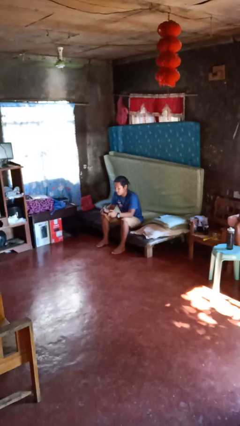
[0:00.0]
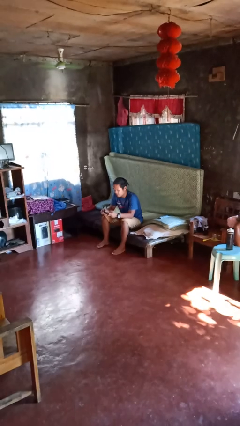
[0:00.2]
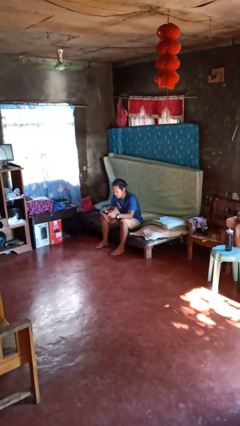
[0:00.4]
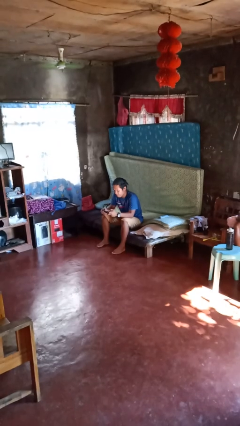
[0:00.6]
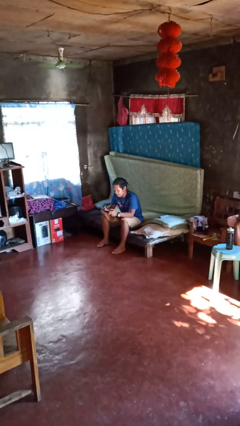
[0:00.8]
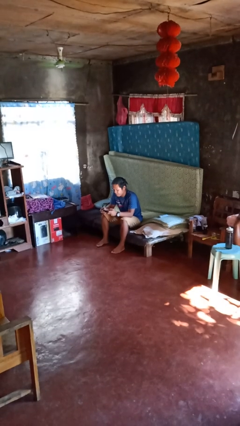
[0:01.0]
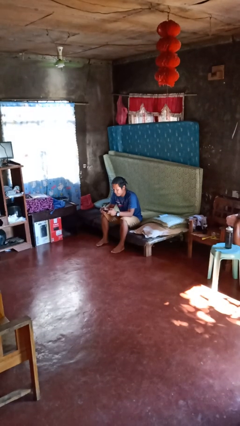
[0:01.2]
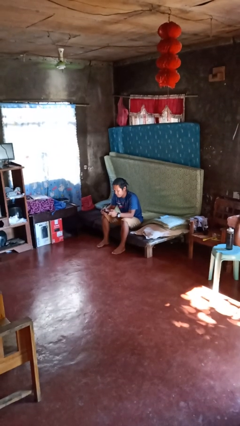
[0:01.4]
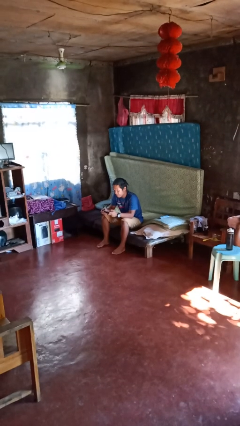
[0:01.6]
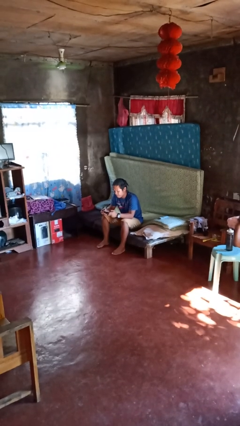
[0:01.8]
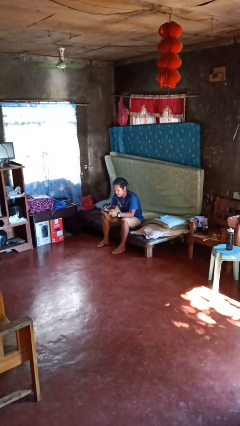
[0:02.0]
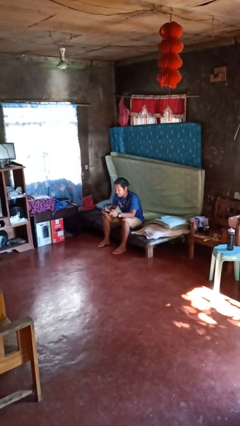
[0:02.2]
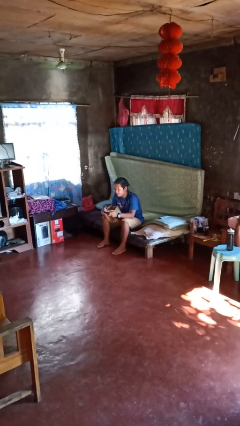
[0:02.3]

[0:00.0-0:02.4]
person interacts with handheld game

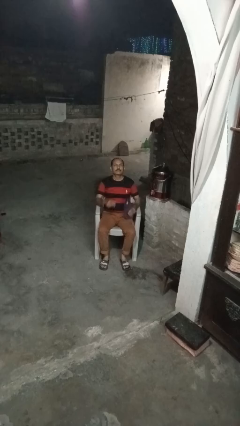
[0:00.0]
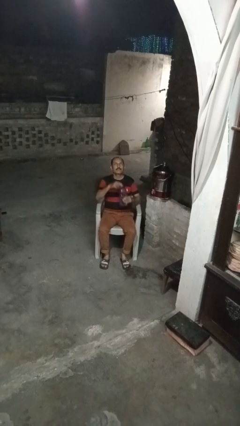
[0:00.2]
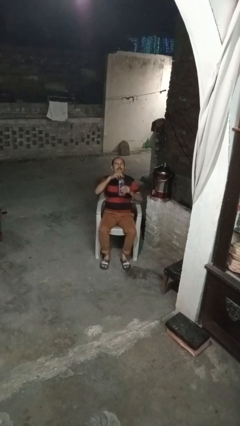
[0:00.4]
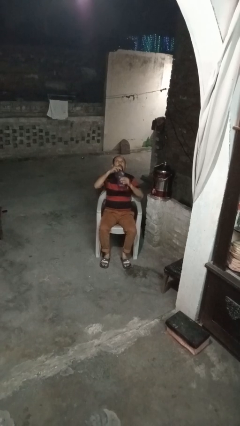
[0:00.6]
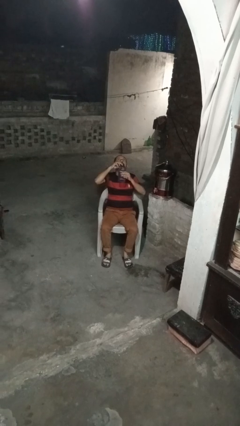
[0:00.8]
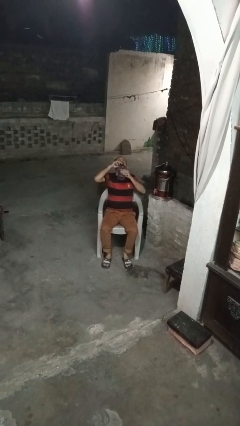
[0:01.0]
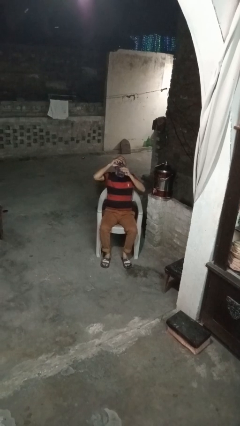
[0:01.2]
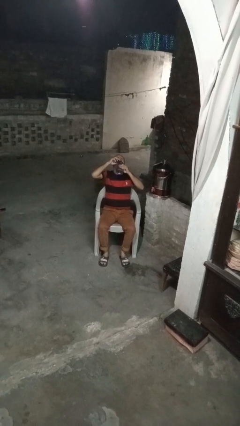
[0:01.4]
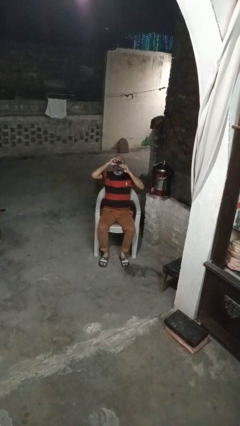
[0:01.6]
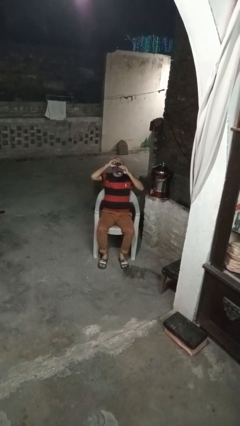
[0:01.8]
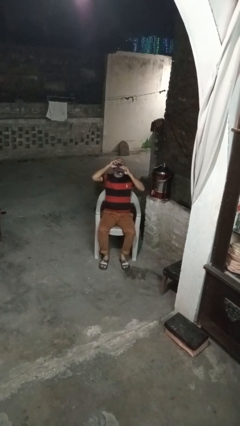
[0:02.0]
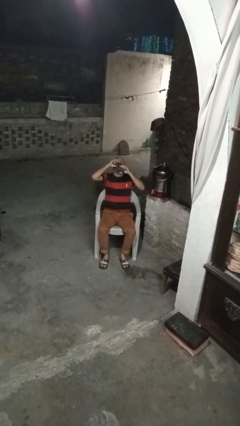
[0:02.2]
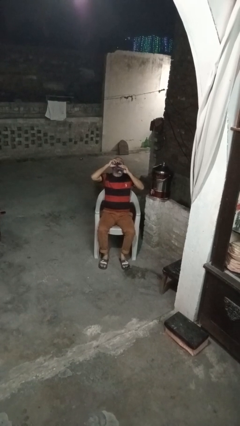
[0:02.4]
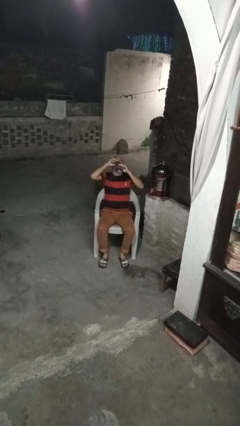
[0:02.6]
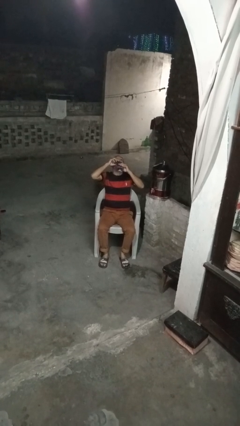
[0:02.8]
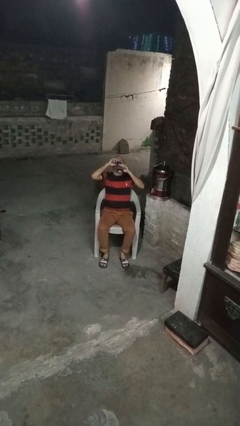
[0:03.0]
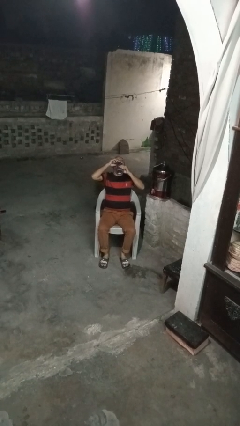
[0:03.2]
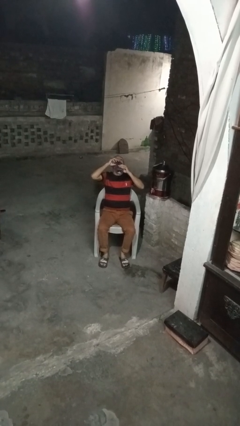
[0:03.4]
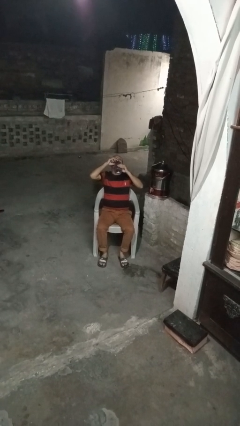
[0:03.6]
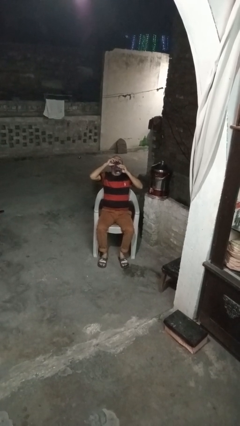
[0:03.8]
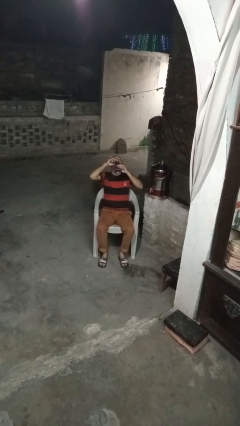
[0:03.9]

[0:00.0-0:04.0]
person drinks from bottle

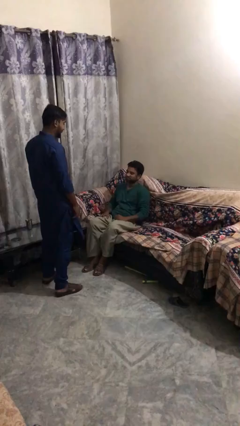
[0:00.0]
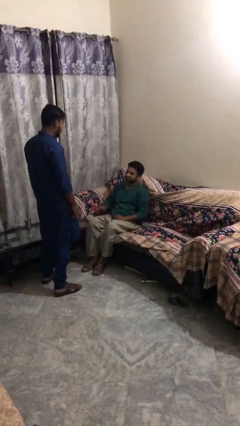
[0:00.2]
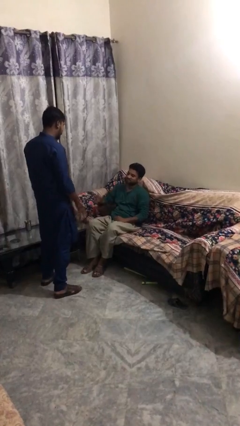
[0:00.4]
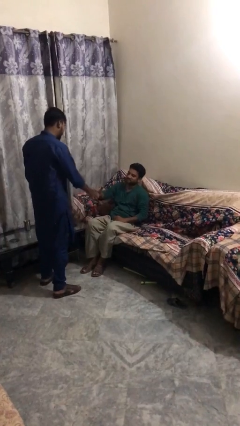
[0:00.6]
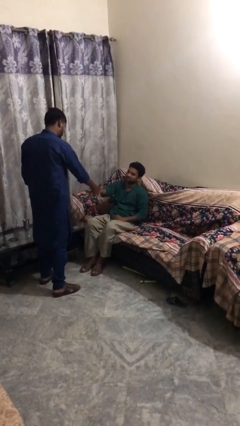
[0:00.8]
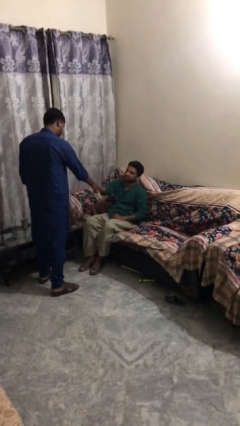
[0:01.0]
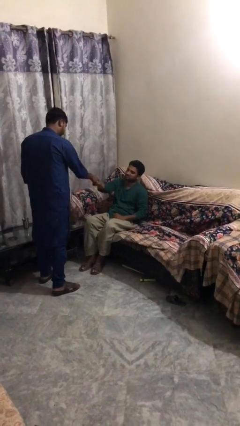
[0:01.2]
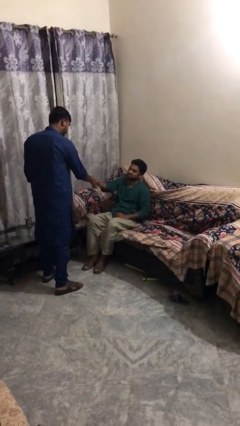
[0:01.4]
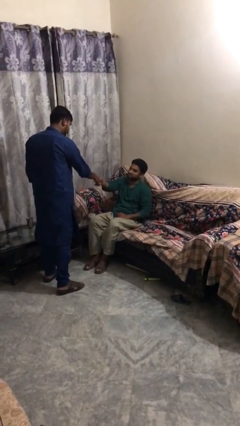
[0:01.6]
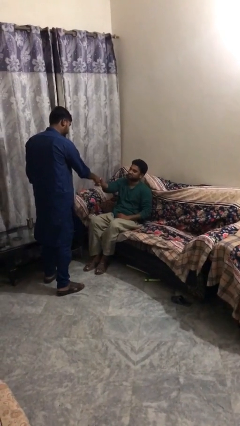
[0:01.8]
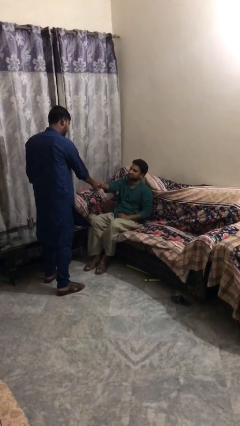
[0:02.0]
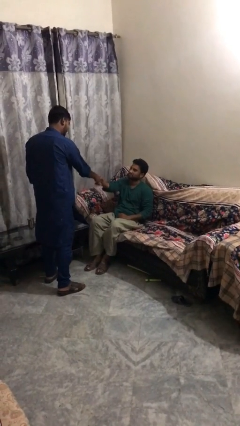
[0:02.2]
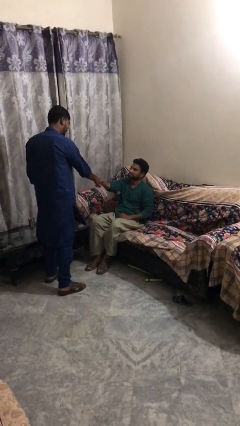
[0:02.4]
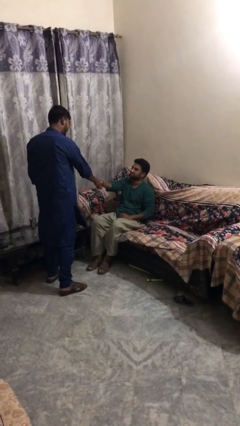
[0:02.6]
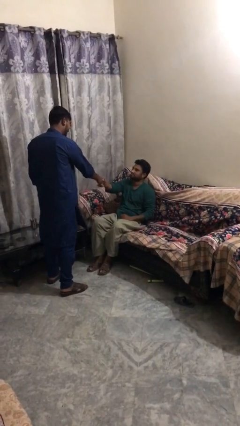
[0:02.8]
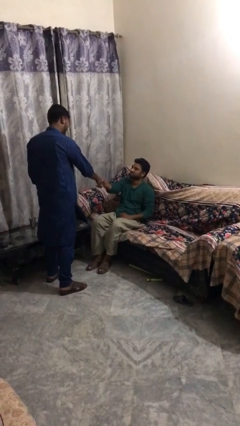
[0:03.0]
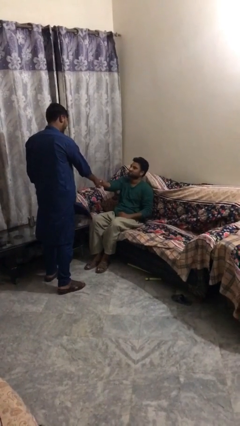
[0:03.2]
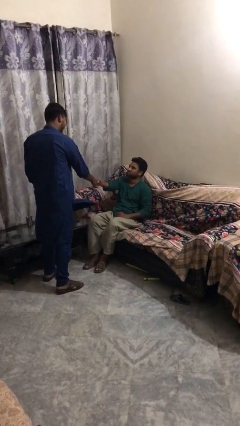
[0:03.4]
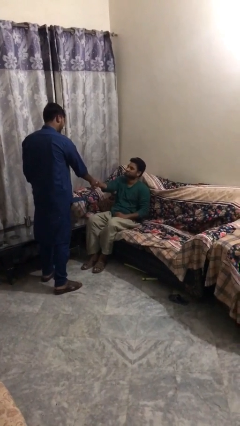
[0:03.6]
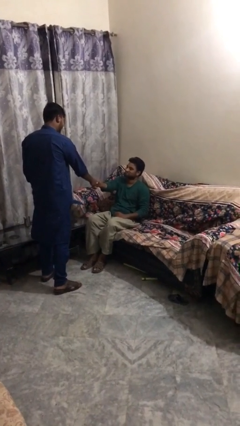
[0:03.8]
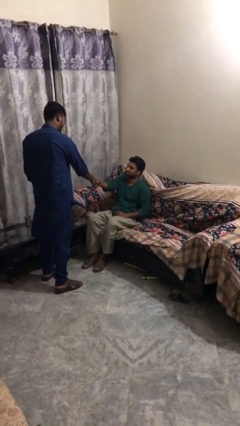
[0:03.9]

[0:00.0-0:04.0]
person shakes hand

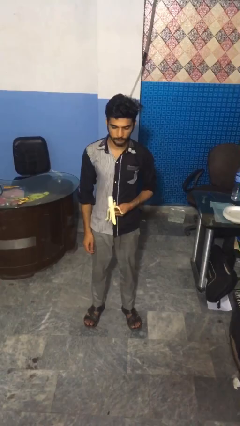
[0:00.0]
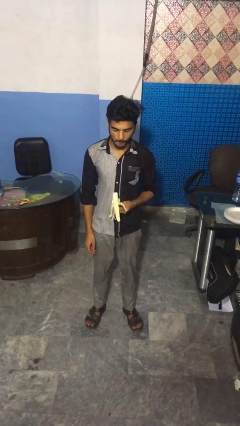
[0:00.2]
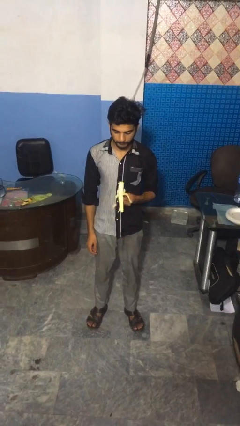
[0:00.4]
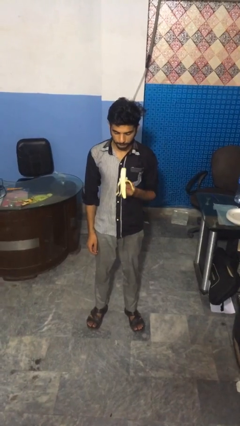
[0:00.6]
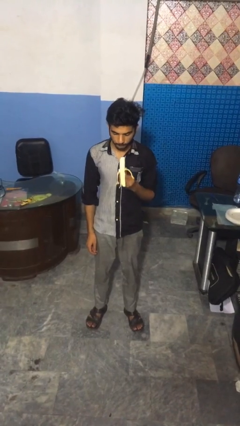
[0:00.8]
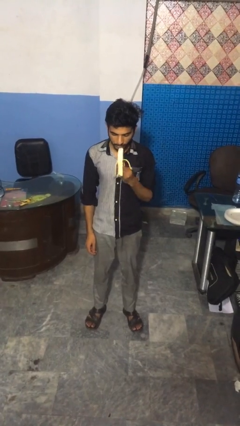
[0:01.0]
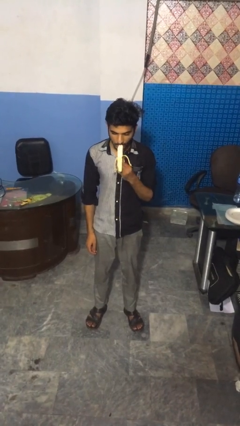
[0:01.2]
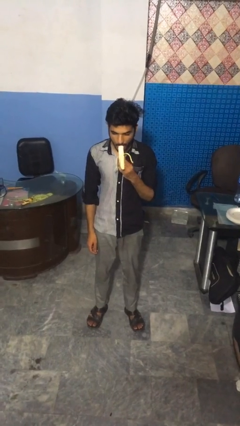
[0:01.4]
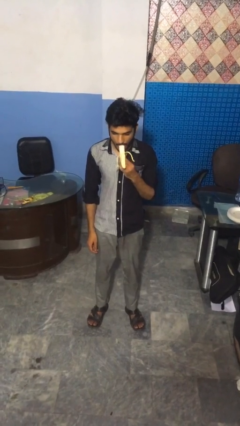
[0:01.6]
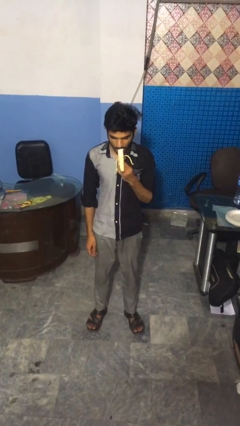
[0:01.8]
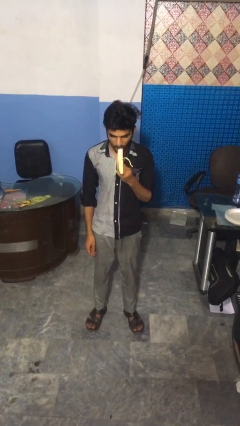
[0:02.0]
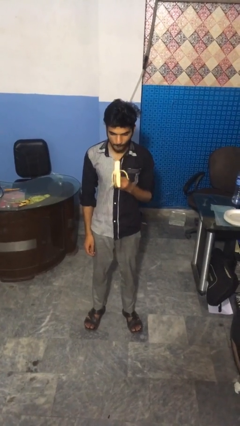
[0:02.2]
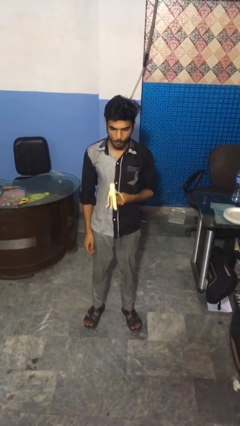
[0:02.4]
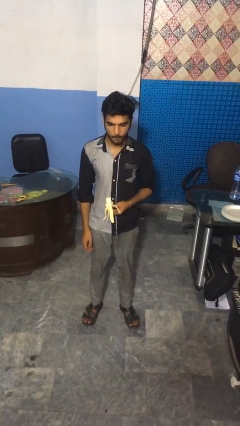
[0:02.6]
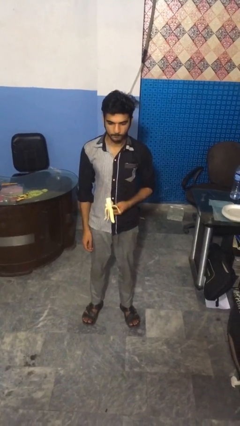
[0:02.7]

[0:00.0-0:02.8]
person eats banana

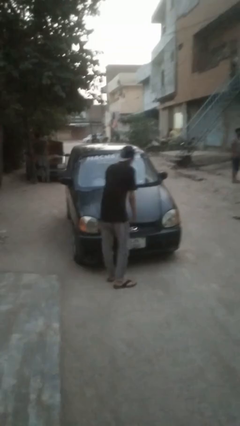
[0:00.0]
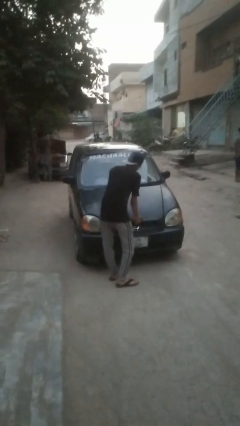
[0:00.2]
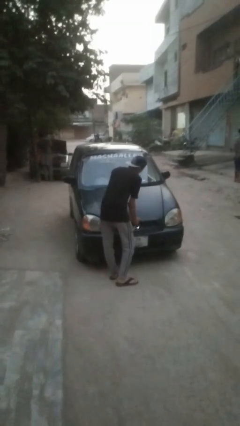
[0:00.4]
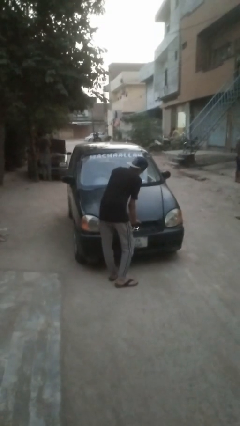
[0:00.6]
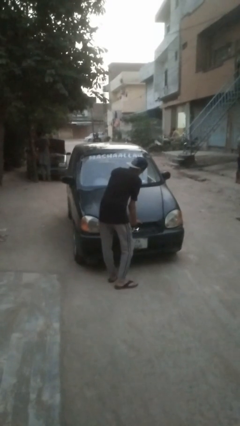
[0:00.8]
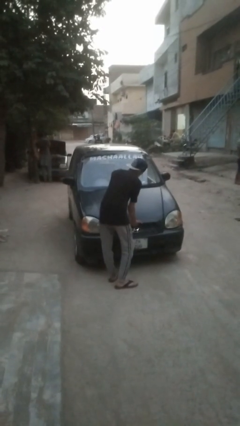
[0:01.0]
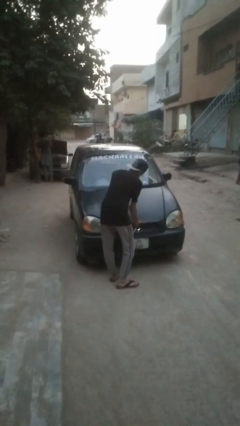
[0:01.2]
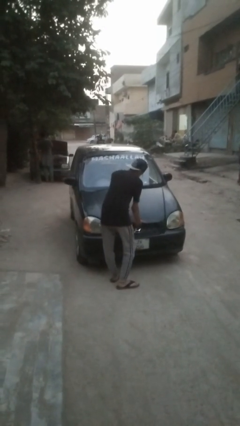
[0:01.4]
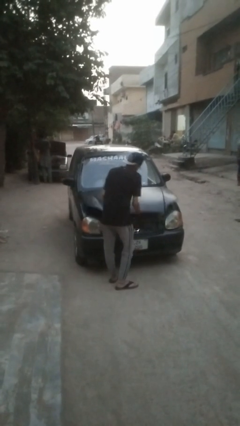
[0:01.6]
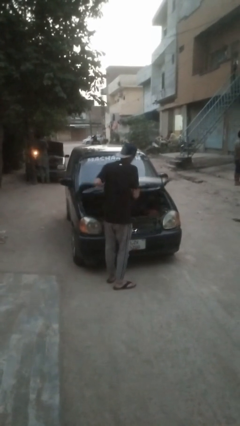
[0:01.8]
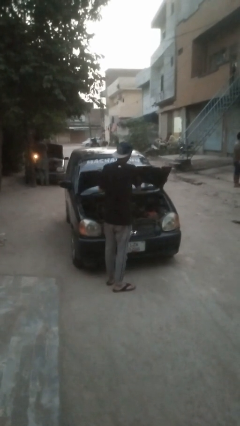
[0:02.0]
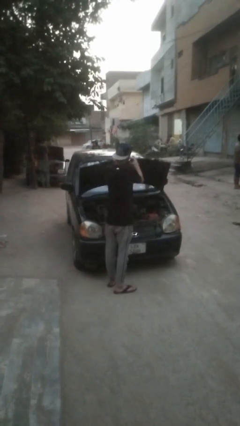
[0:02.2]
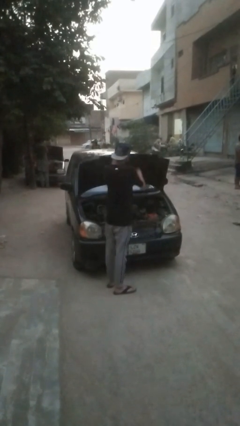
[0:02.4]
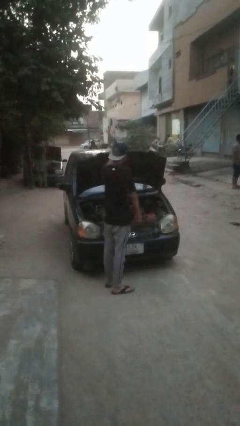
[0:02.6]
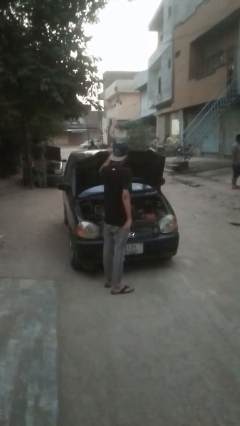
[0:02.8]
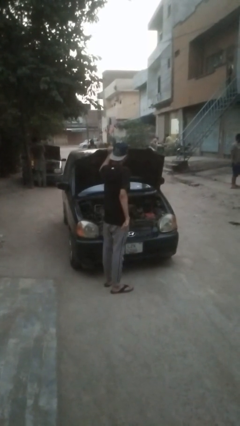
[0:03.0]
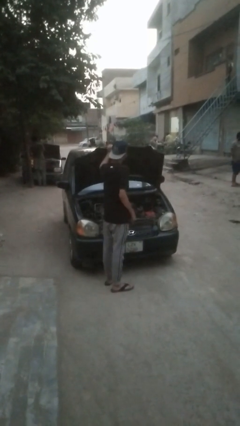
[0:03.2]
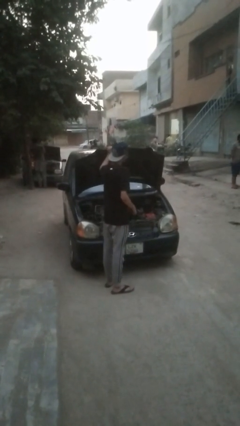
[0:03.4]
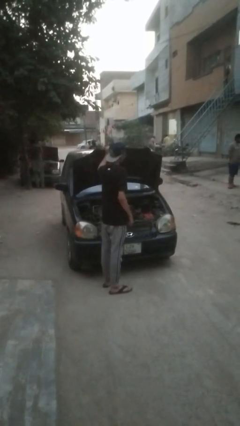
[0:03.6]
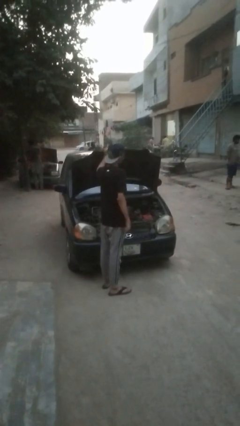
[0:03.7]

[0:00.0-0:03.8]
person opens car hood
